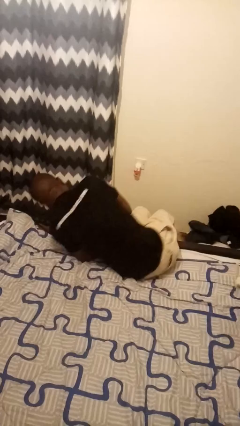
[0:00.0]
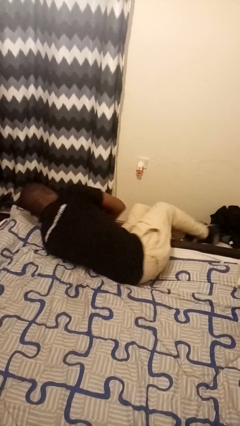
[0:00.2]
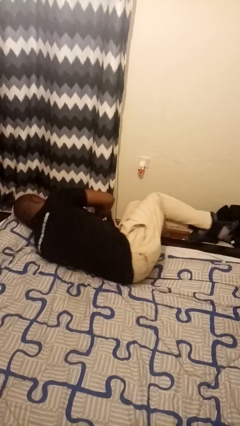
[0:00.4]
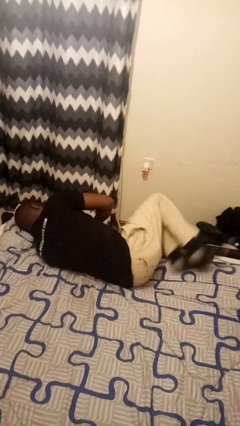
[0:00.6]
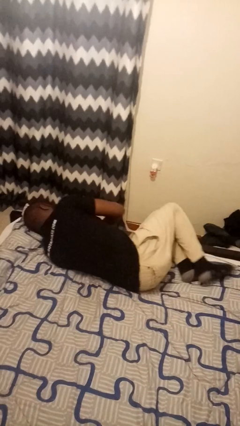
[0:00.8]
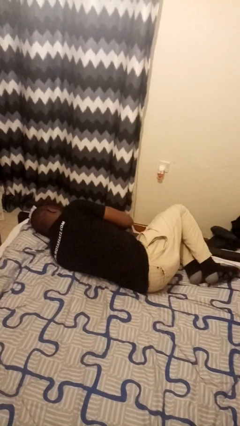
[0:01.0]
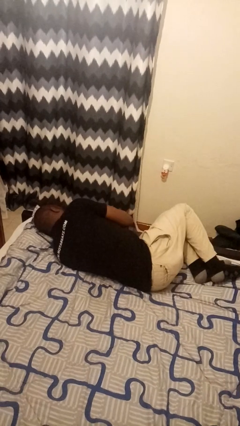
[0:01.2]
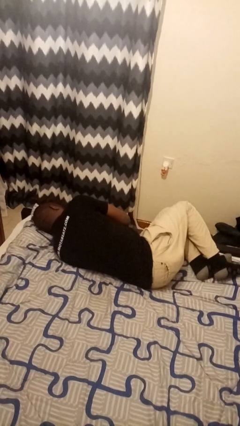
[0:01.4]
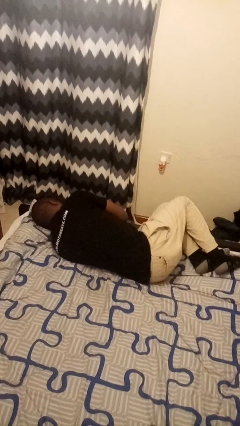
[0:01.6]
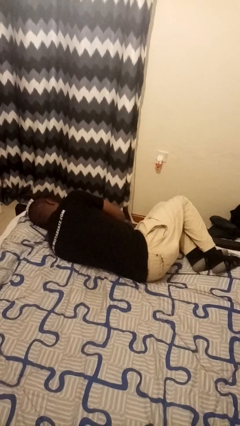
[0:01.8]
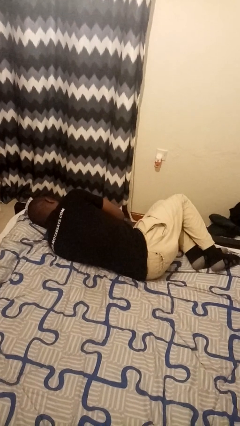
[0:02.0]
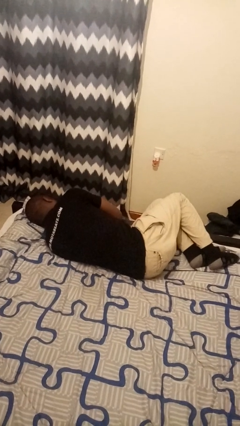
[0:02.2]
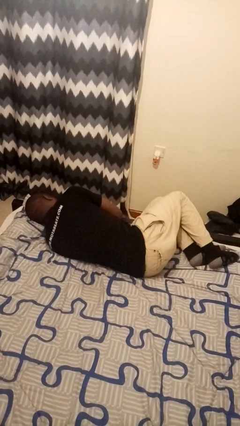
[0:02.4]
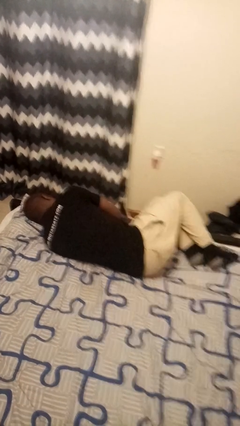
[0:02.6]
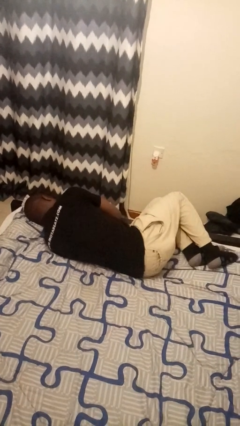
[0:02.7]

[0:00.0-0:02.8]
person lies down on bed

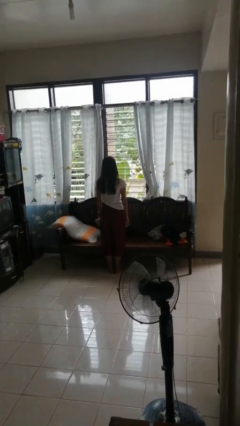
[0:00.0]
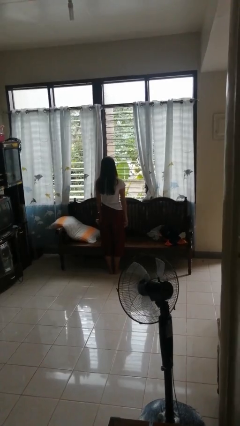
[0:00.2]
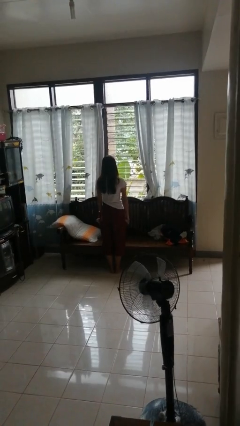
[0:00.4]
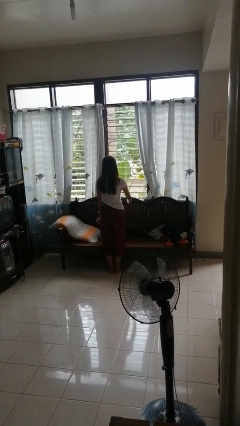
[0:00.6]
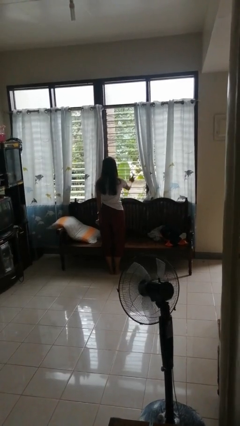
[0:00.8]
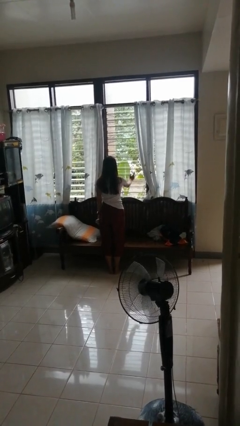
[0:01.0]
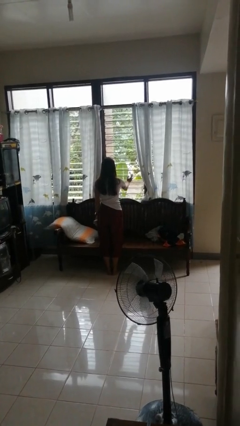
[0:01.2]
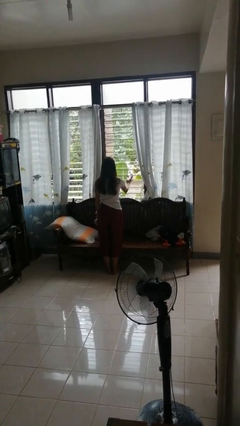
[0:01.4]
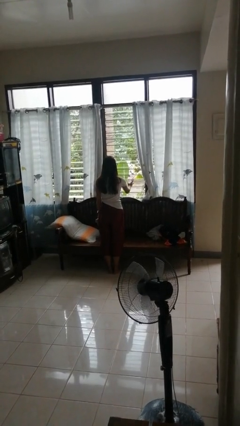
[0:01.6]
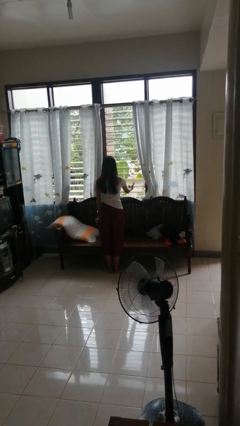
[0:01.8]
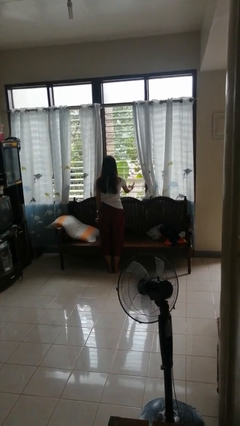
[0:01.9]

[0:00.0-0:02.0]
person sprays from bottle

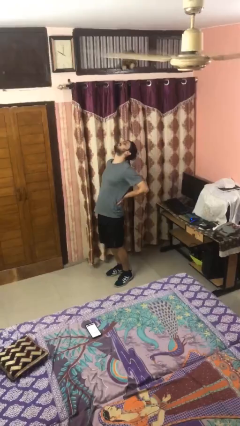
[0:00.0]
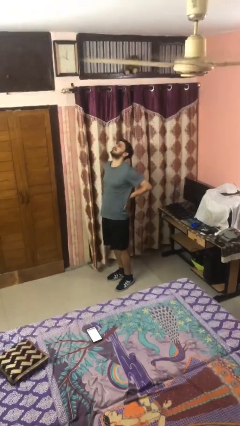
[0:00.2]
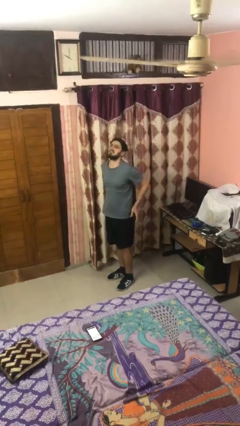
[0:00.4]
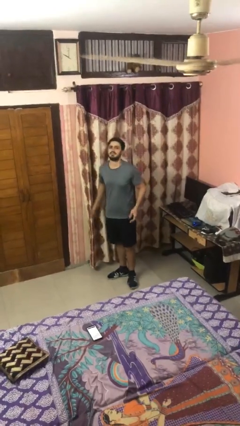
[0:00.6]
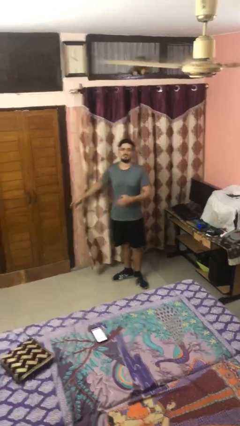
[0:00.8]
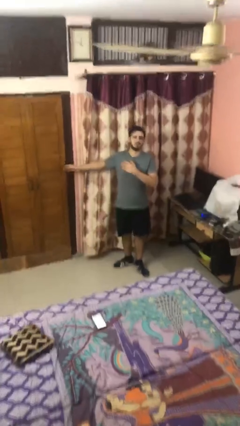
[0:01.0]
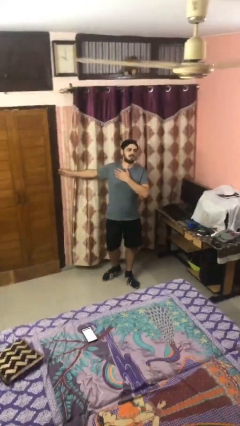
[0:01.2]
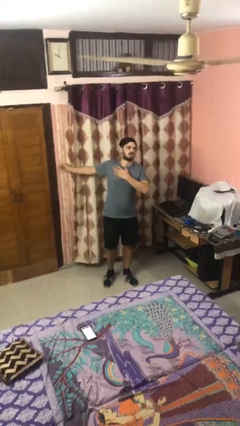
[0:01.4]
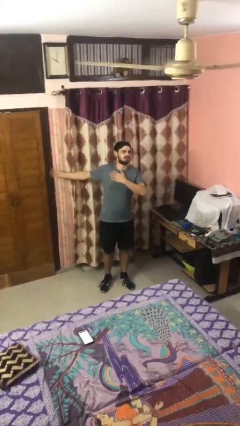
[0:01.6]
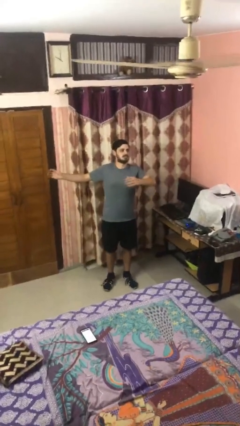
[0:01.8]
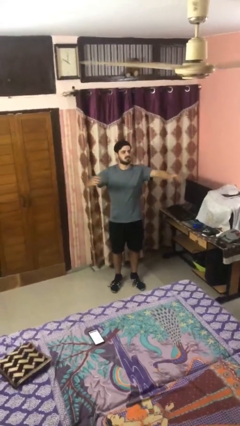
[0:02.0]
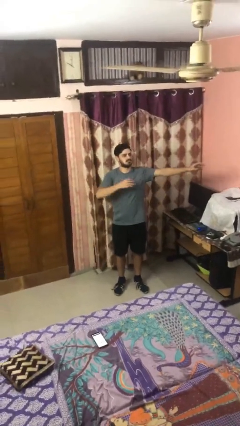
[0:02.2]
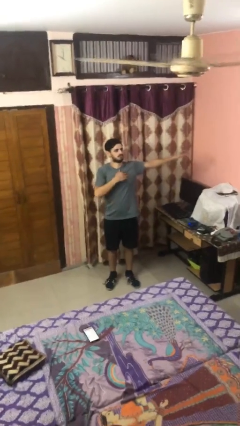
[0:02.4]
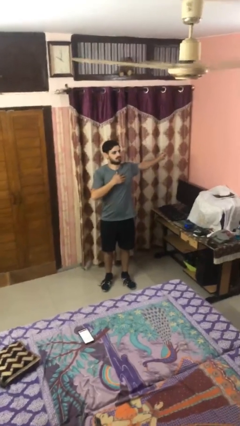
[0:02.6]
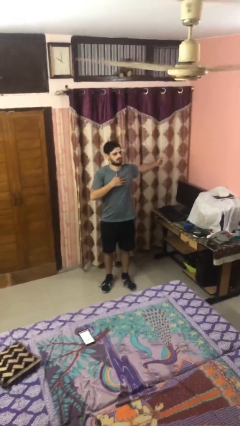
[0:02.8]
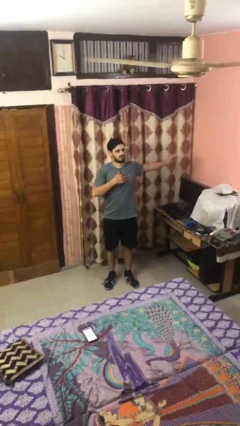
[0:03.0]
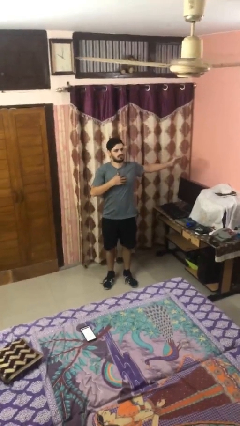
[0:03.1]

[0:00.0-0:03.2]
person stretches arms to side

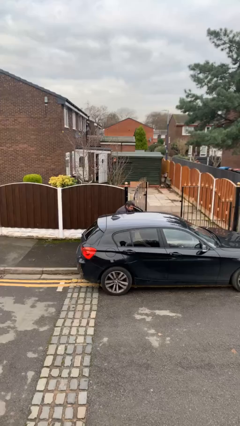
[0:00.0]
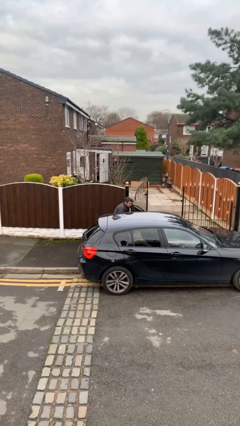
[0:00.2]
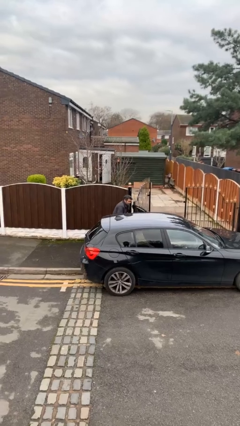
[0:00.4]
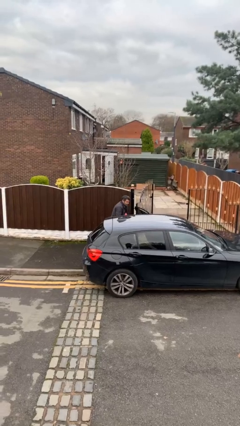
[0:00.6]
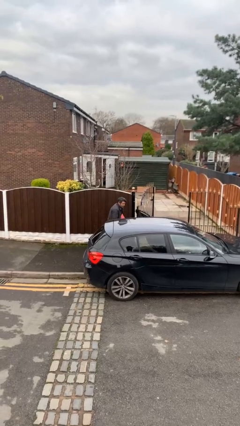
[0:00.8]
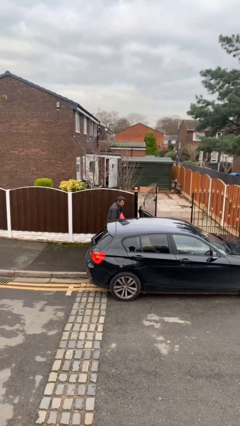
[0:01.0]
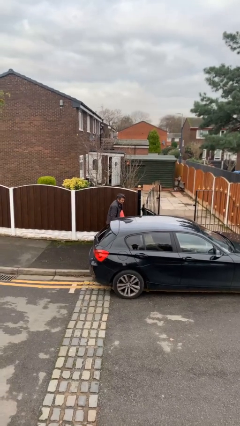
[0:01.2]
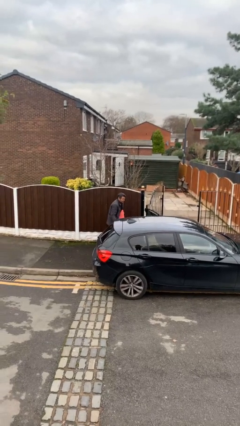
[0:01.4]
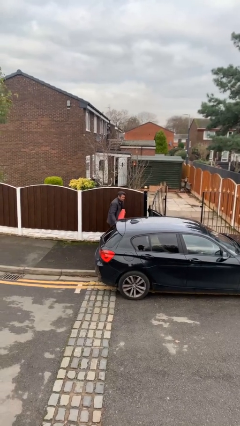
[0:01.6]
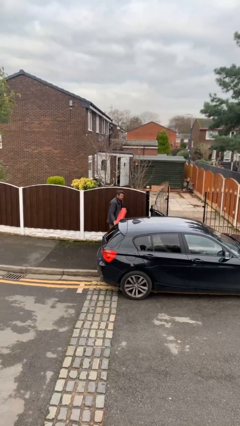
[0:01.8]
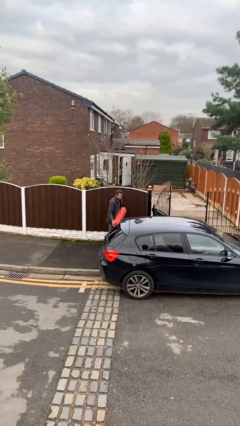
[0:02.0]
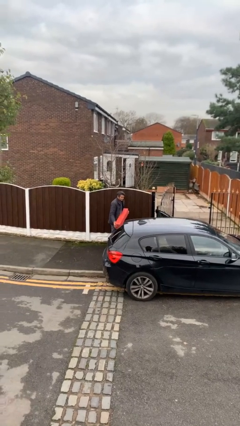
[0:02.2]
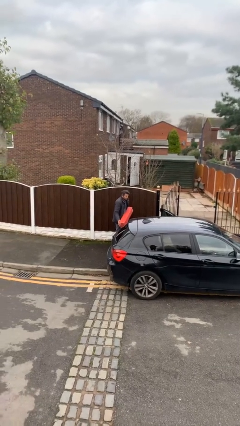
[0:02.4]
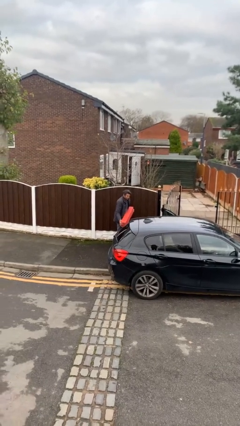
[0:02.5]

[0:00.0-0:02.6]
person unloads car

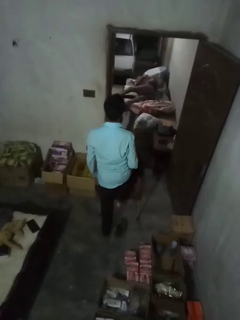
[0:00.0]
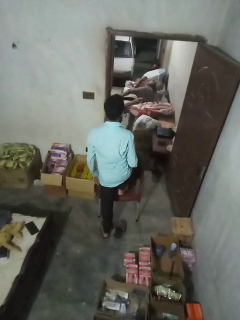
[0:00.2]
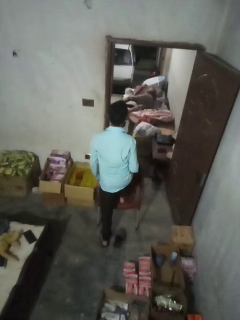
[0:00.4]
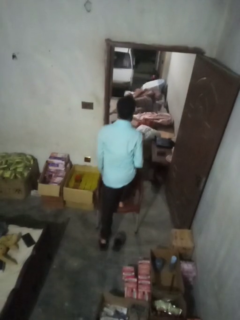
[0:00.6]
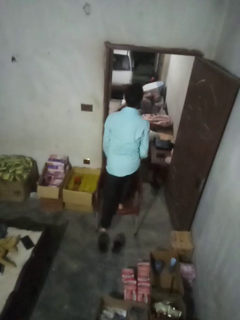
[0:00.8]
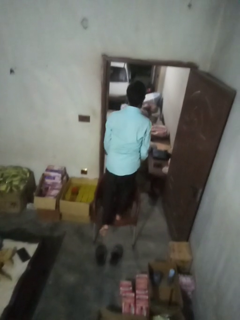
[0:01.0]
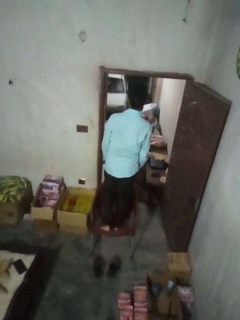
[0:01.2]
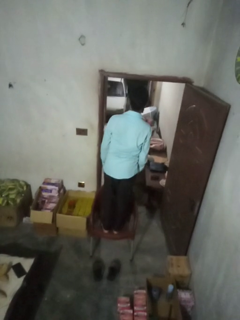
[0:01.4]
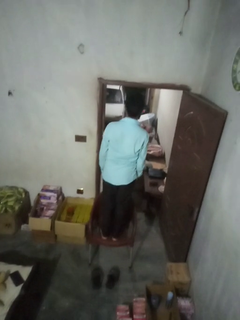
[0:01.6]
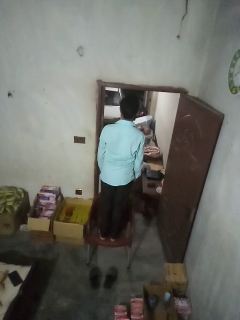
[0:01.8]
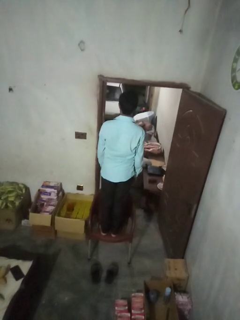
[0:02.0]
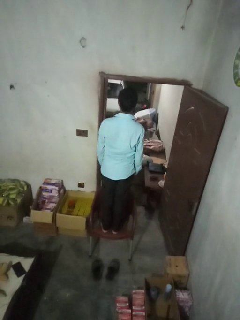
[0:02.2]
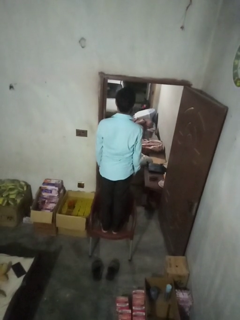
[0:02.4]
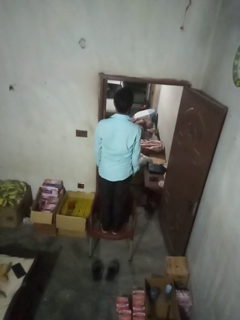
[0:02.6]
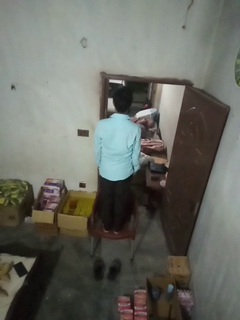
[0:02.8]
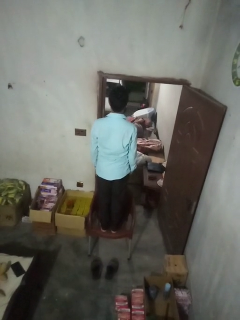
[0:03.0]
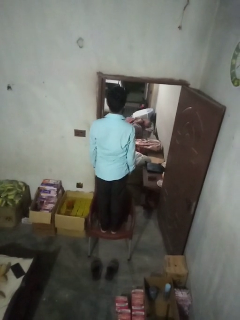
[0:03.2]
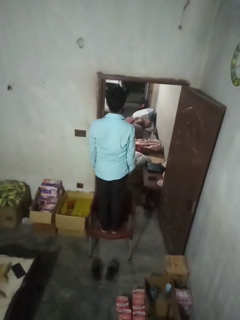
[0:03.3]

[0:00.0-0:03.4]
person climbs on chair

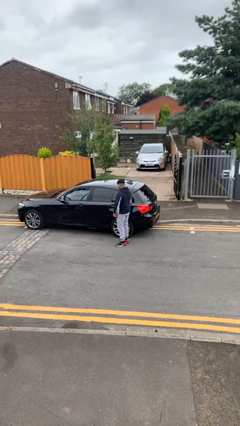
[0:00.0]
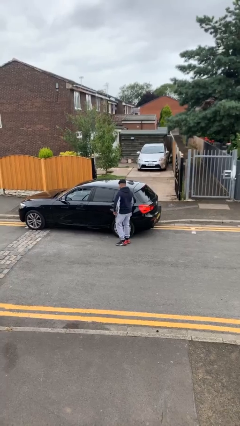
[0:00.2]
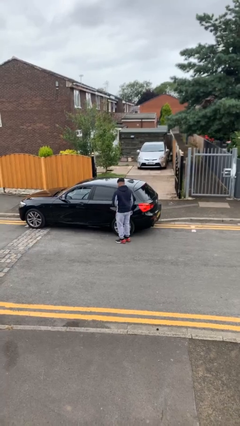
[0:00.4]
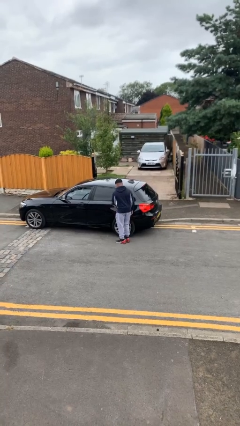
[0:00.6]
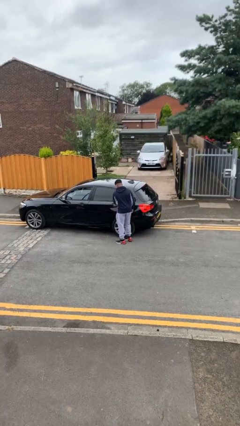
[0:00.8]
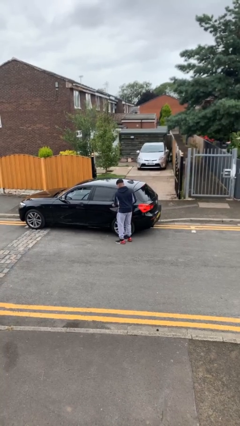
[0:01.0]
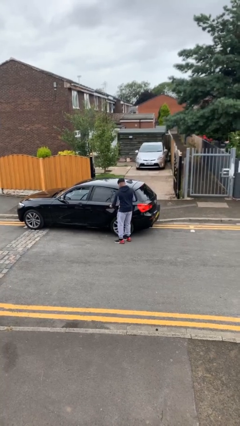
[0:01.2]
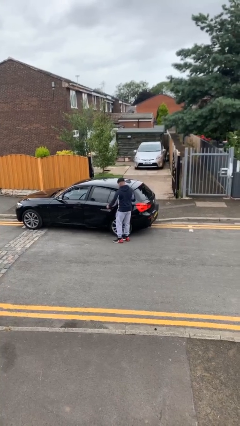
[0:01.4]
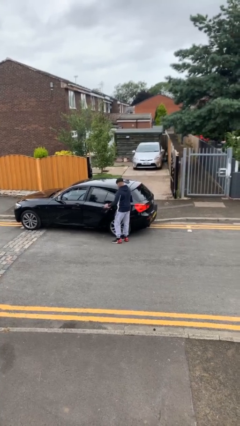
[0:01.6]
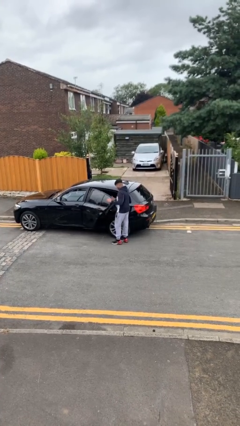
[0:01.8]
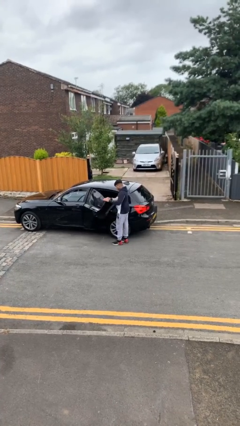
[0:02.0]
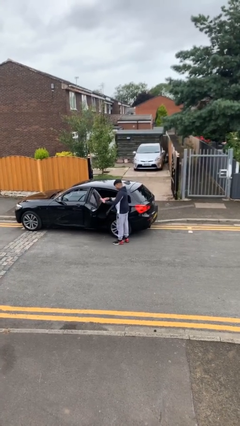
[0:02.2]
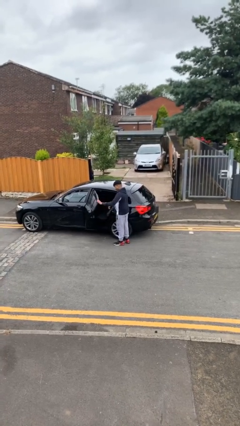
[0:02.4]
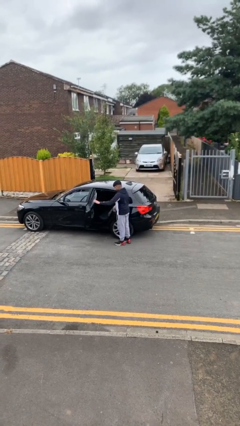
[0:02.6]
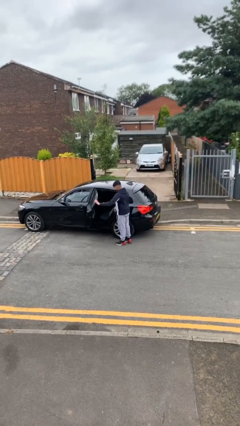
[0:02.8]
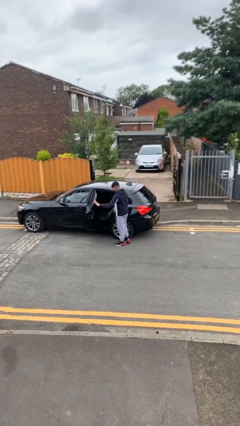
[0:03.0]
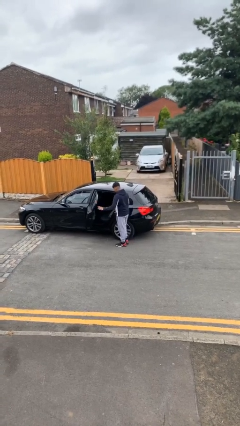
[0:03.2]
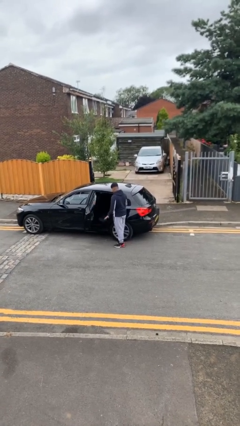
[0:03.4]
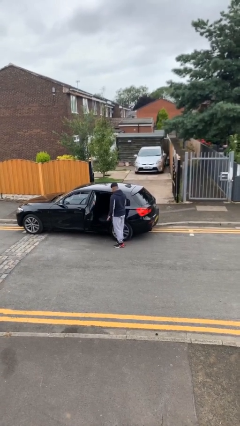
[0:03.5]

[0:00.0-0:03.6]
person opens car door

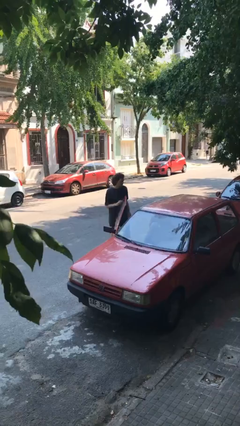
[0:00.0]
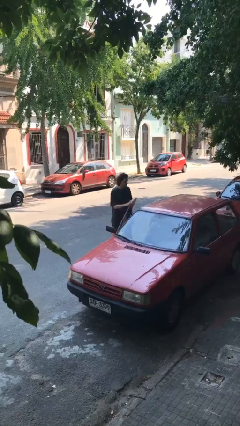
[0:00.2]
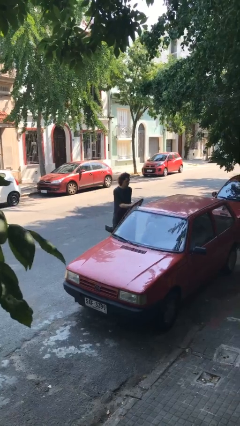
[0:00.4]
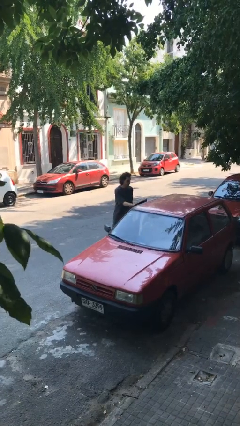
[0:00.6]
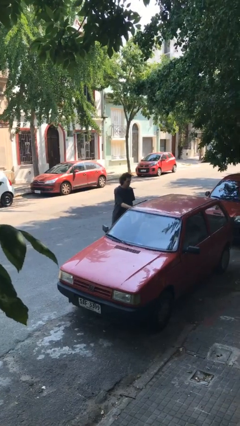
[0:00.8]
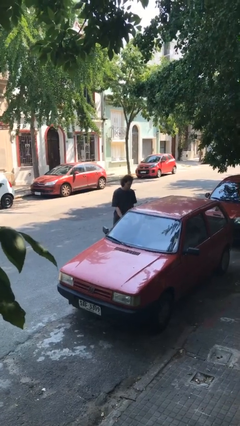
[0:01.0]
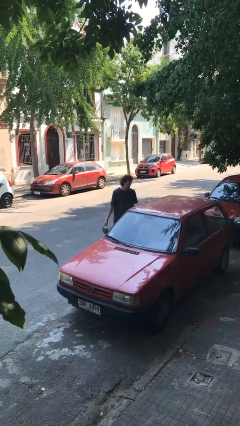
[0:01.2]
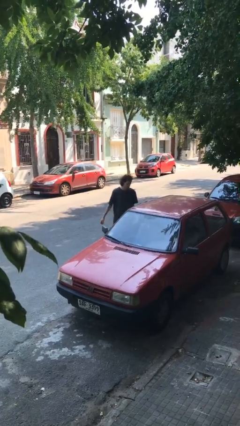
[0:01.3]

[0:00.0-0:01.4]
person closes car door
